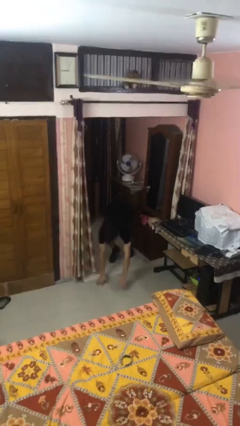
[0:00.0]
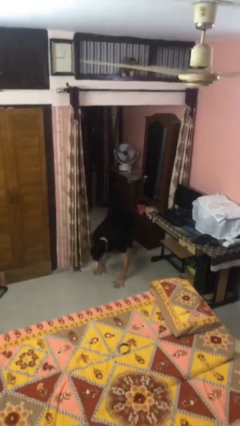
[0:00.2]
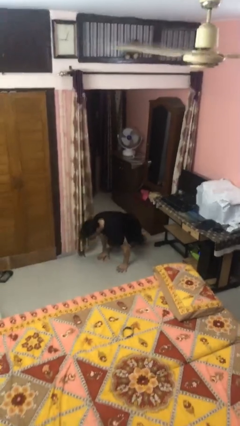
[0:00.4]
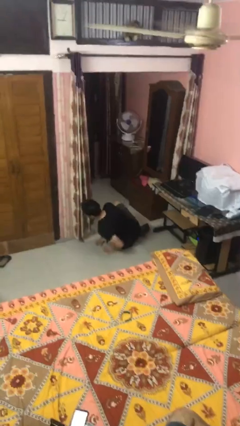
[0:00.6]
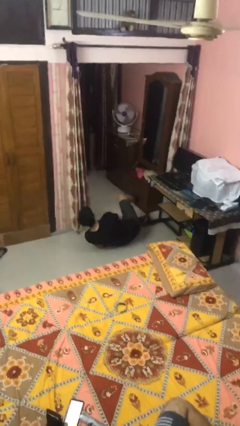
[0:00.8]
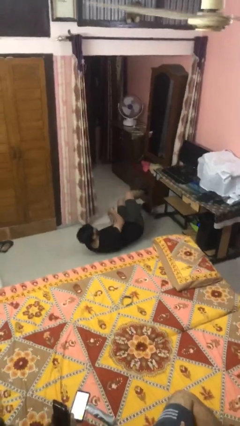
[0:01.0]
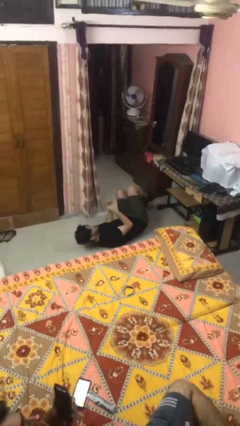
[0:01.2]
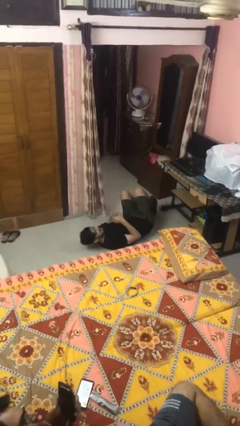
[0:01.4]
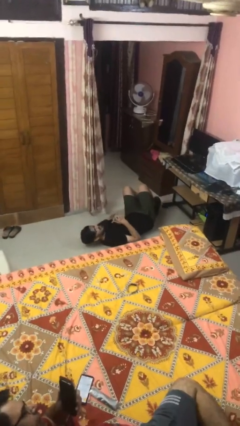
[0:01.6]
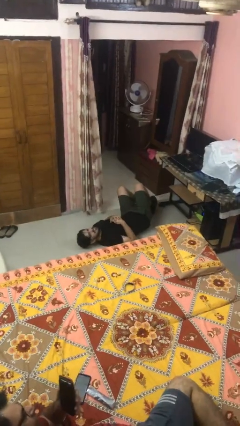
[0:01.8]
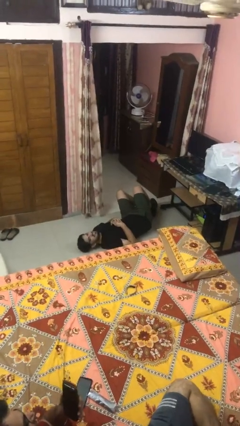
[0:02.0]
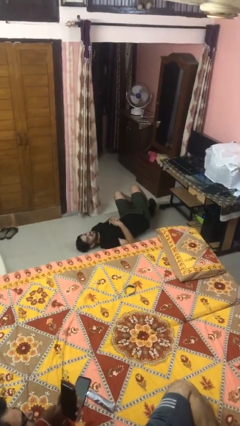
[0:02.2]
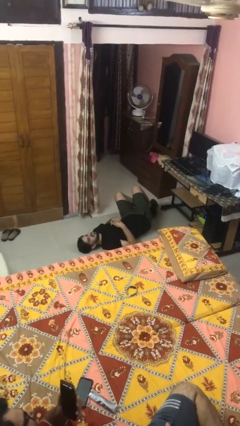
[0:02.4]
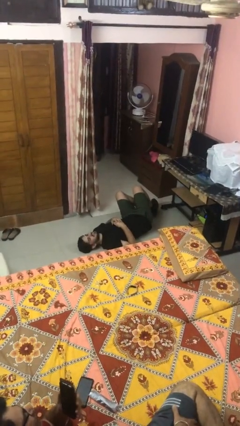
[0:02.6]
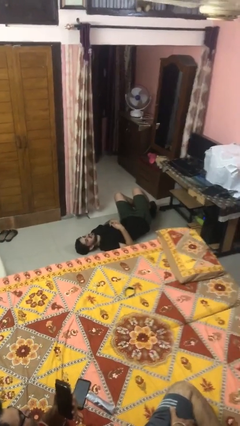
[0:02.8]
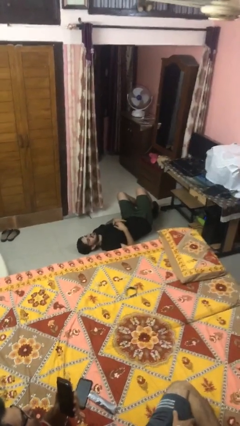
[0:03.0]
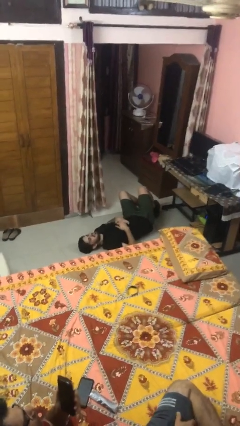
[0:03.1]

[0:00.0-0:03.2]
person lies down on floor

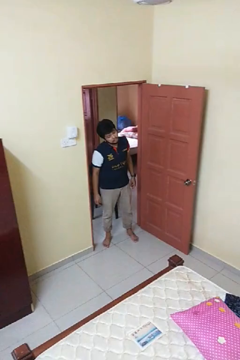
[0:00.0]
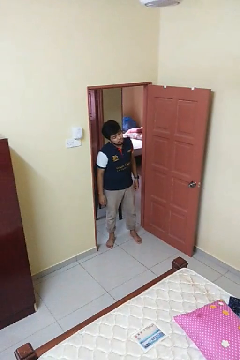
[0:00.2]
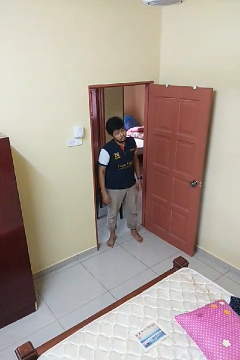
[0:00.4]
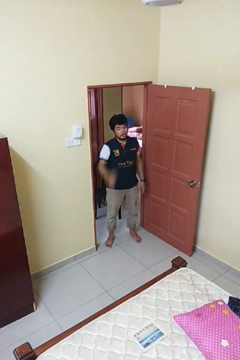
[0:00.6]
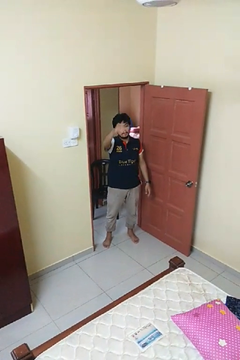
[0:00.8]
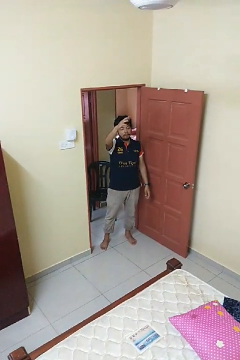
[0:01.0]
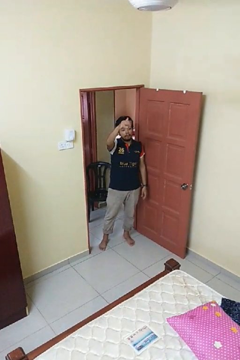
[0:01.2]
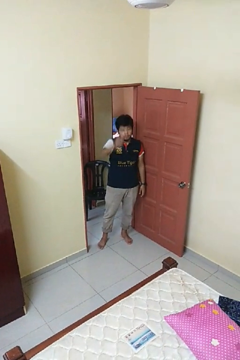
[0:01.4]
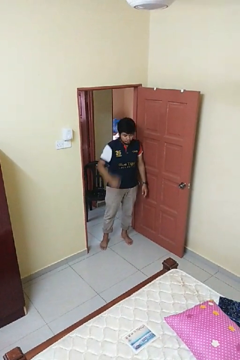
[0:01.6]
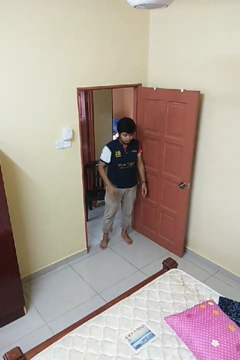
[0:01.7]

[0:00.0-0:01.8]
person gestures come here

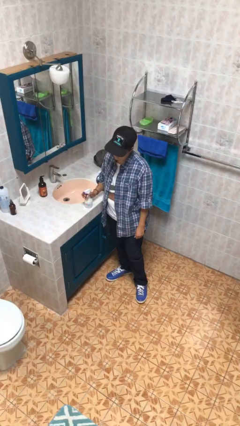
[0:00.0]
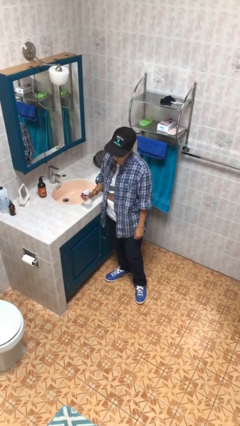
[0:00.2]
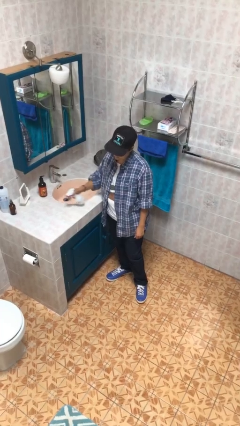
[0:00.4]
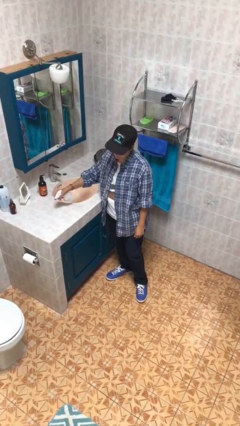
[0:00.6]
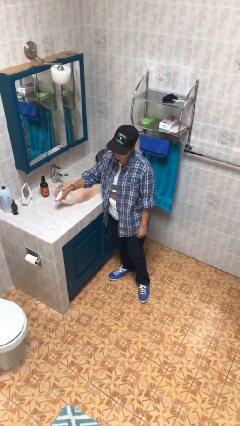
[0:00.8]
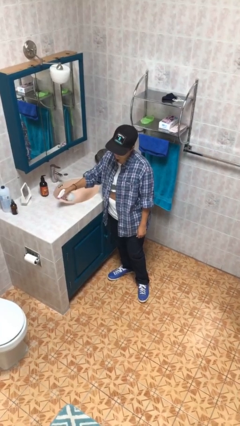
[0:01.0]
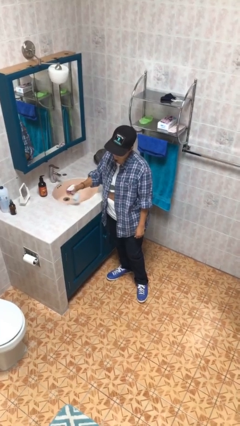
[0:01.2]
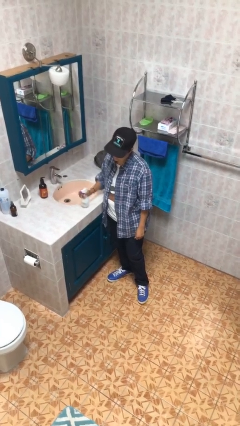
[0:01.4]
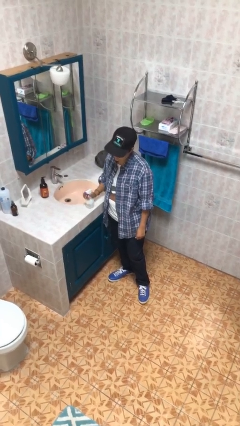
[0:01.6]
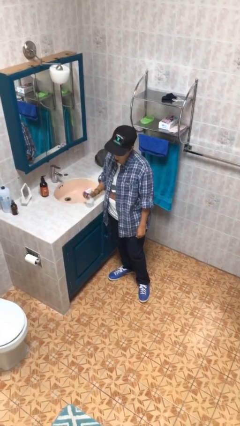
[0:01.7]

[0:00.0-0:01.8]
person sprays from bottle

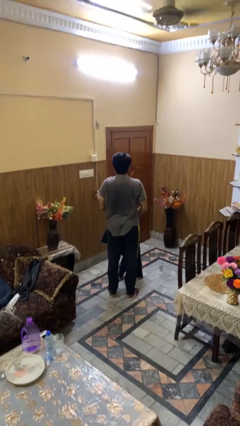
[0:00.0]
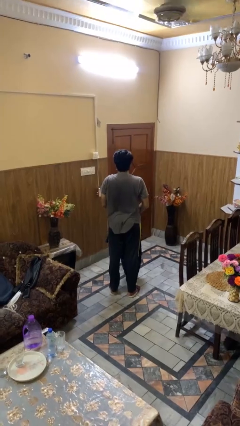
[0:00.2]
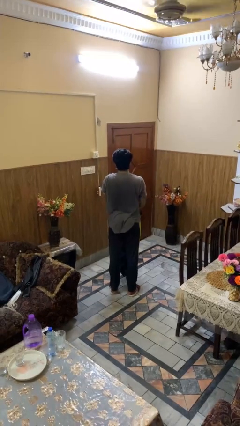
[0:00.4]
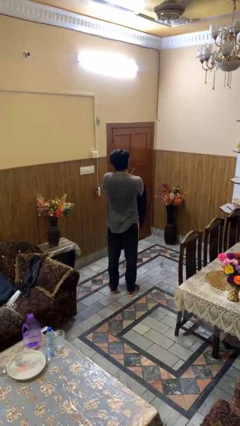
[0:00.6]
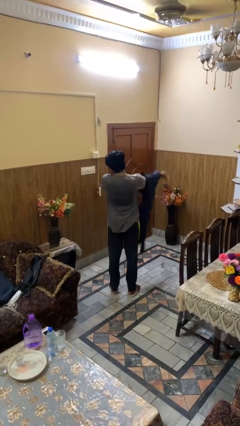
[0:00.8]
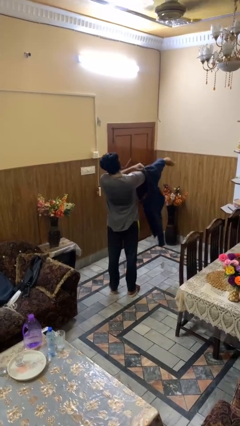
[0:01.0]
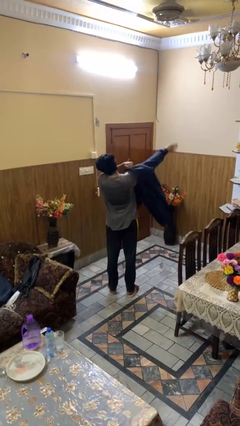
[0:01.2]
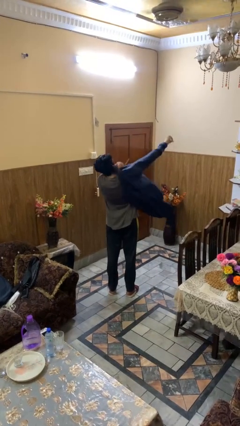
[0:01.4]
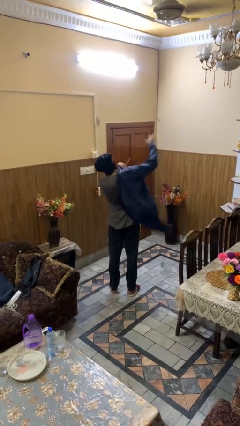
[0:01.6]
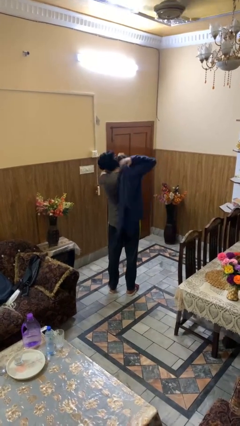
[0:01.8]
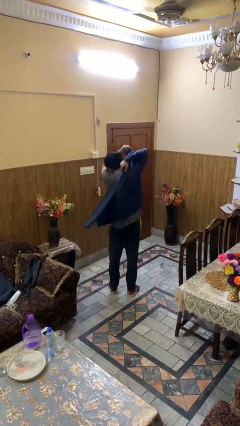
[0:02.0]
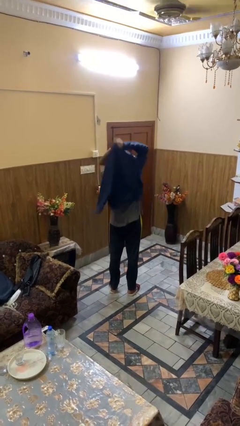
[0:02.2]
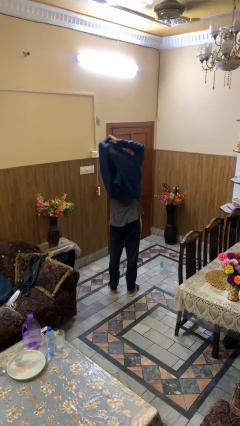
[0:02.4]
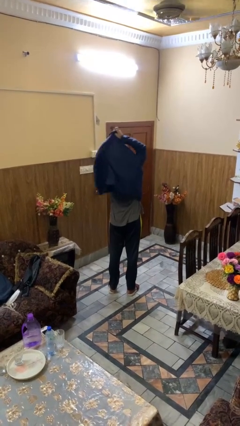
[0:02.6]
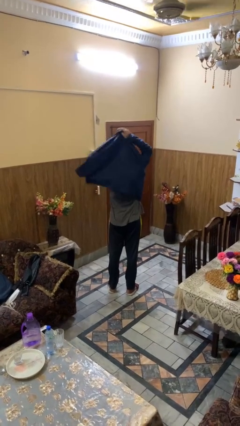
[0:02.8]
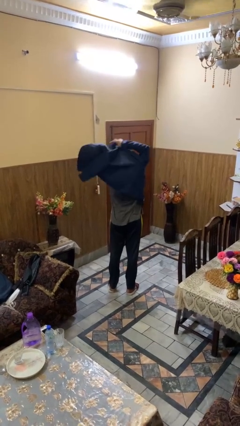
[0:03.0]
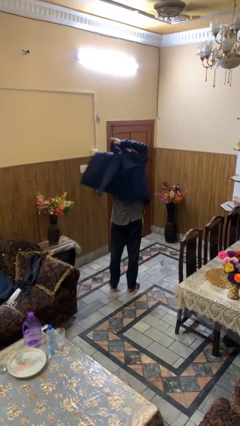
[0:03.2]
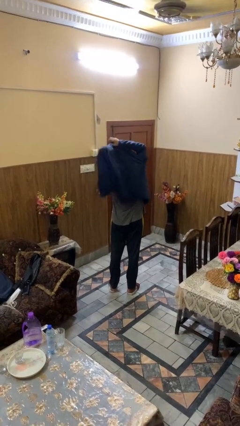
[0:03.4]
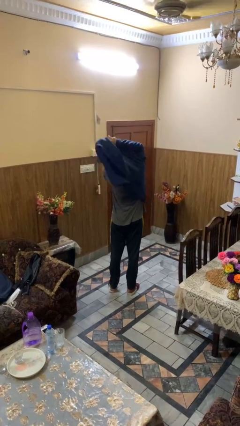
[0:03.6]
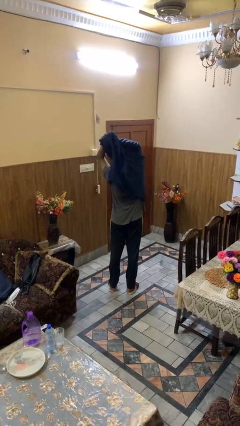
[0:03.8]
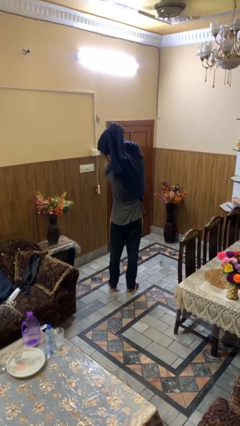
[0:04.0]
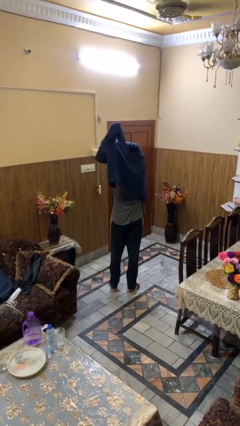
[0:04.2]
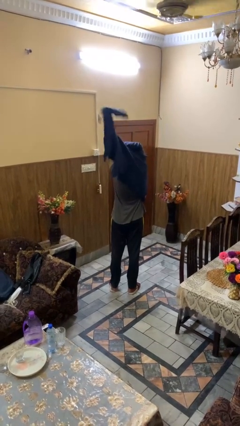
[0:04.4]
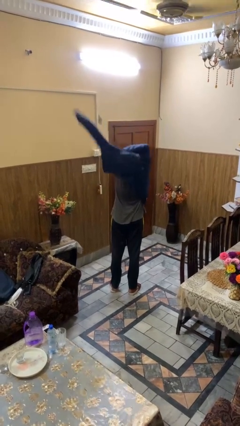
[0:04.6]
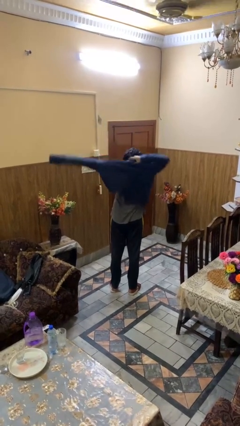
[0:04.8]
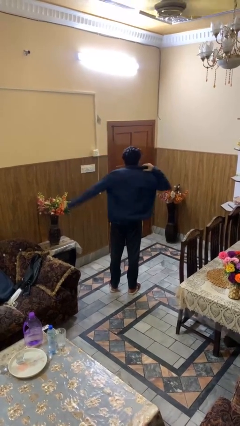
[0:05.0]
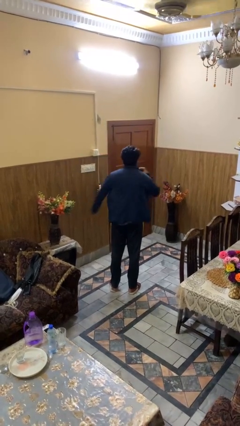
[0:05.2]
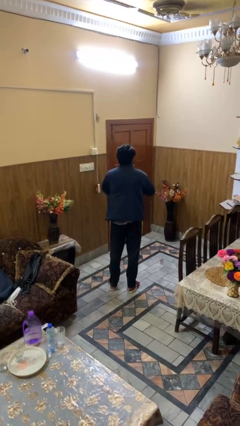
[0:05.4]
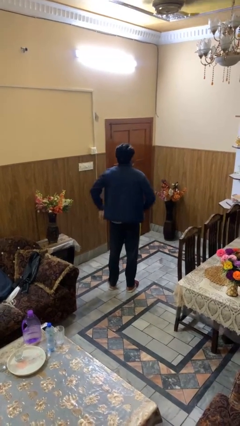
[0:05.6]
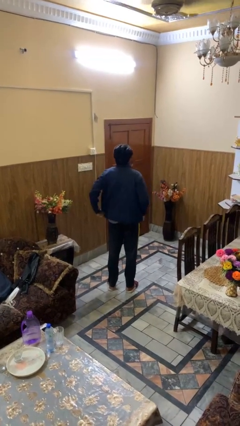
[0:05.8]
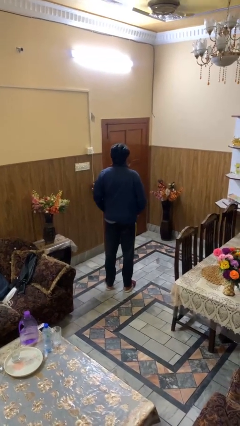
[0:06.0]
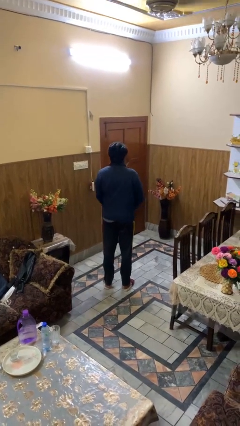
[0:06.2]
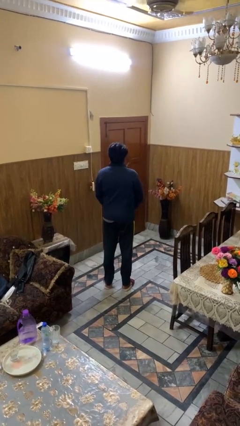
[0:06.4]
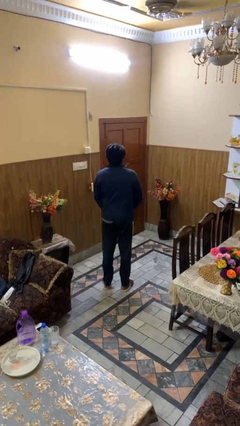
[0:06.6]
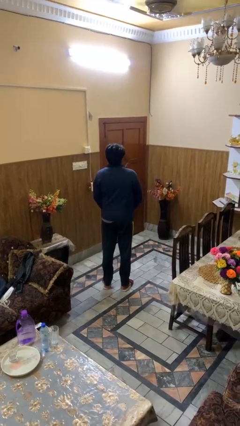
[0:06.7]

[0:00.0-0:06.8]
person puts on jacket

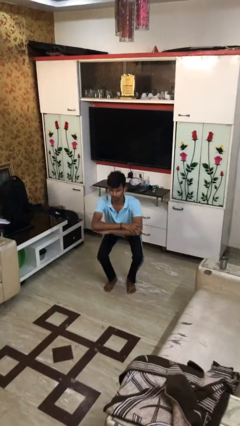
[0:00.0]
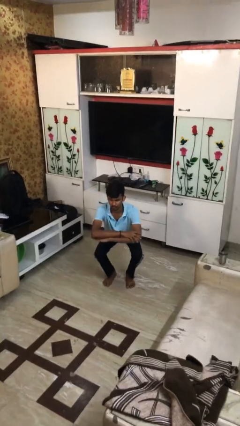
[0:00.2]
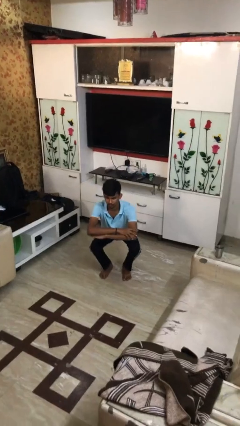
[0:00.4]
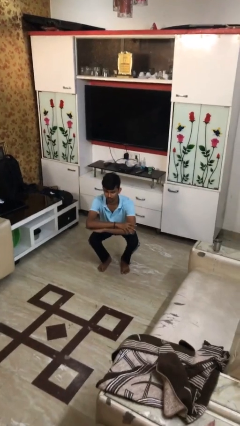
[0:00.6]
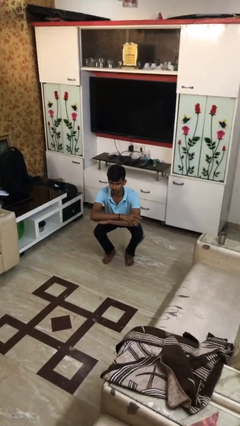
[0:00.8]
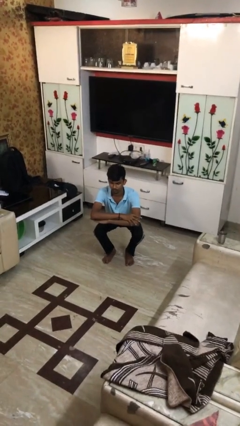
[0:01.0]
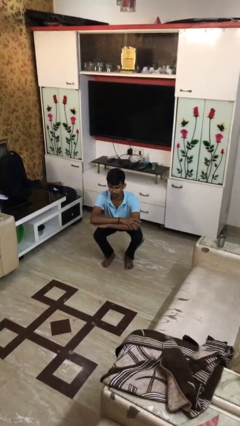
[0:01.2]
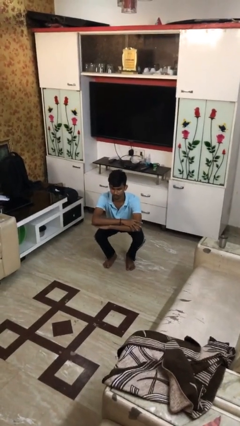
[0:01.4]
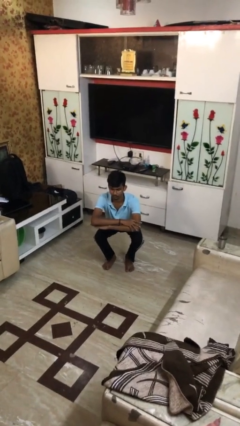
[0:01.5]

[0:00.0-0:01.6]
person squats

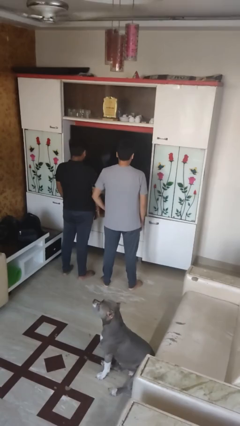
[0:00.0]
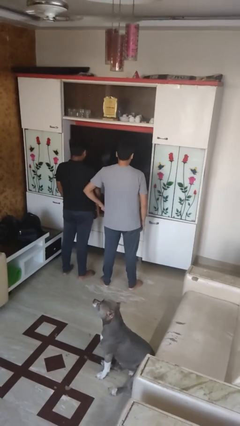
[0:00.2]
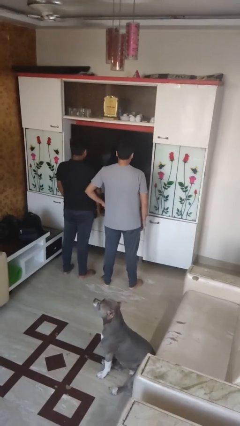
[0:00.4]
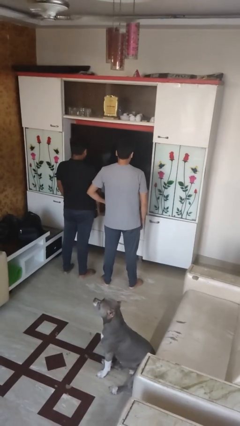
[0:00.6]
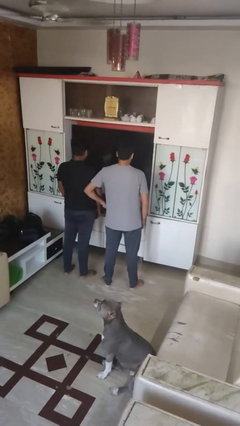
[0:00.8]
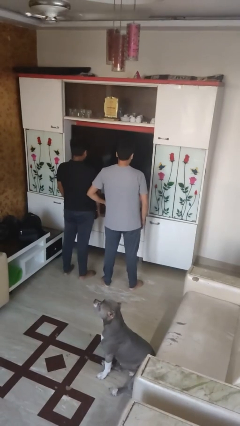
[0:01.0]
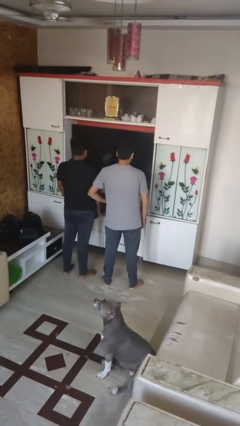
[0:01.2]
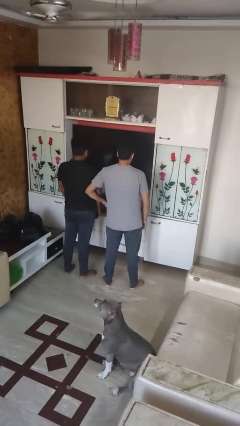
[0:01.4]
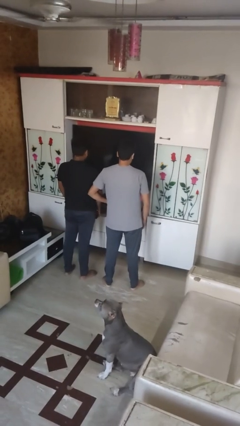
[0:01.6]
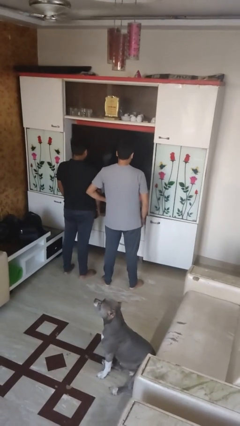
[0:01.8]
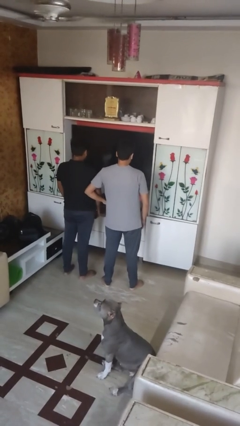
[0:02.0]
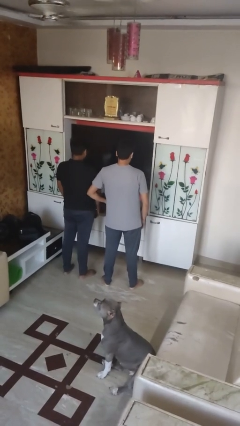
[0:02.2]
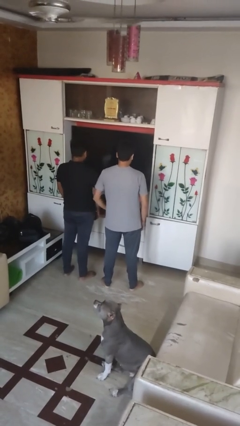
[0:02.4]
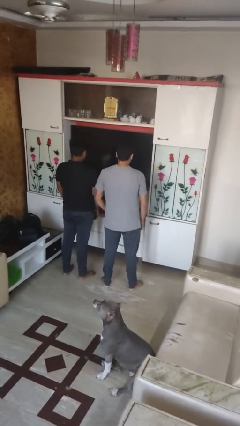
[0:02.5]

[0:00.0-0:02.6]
person nudges person with elbow
